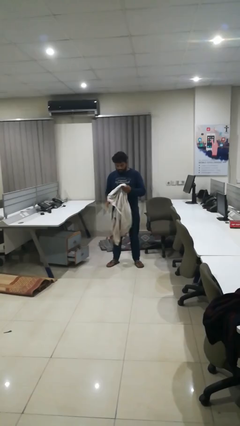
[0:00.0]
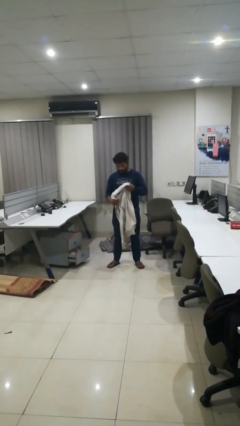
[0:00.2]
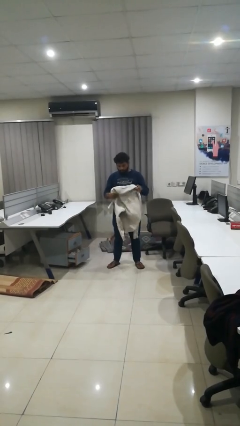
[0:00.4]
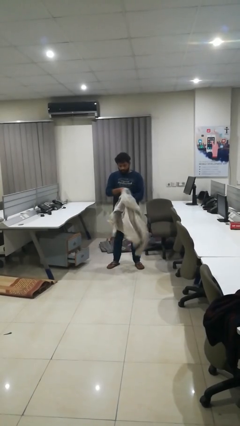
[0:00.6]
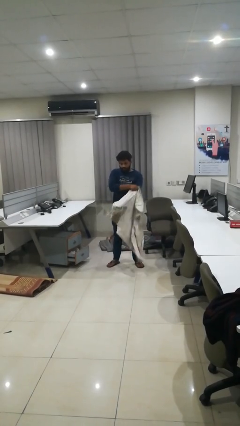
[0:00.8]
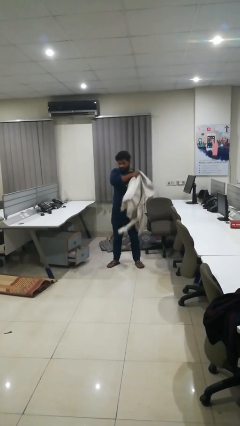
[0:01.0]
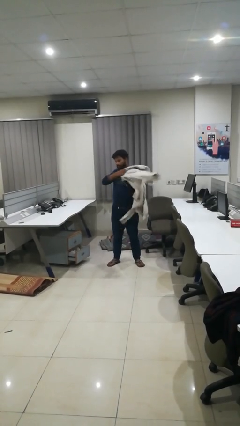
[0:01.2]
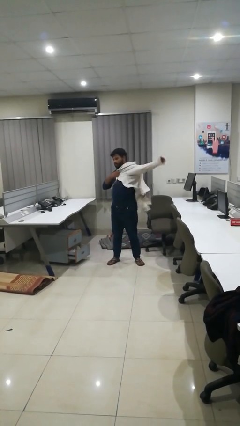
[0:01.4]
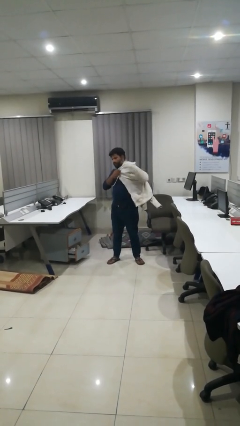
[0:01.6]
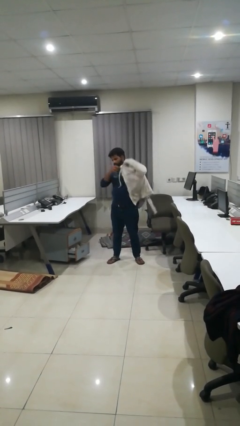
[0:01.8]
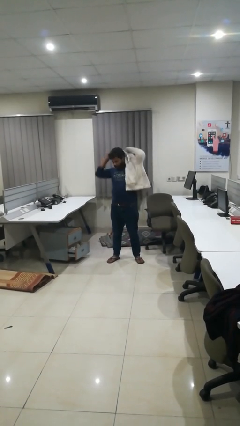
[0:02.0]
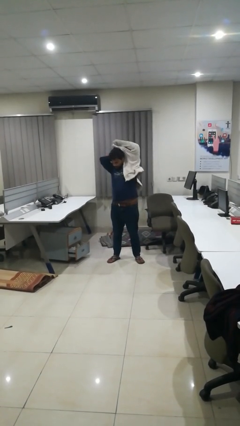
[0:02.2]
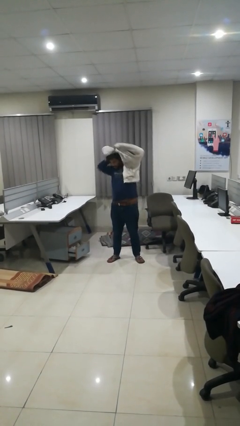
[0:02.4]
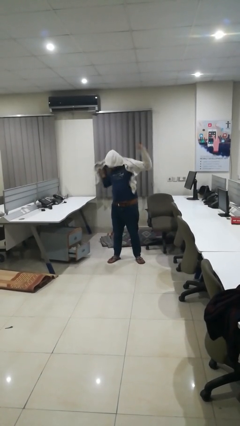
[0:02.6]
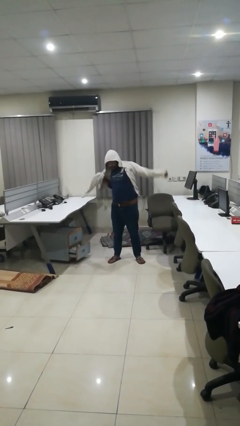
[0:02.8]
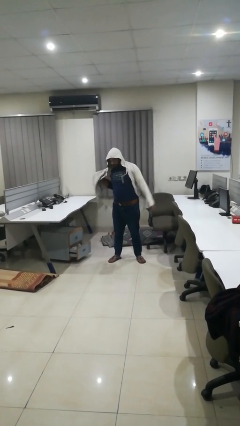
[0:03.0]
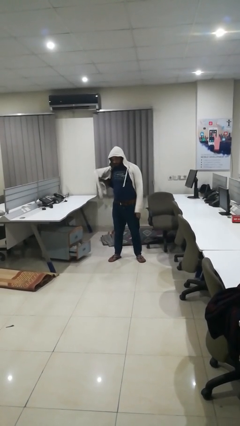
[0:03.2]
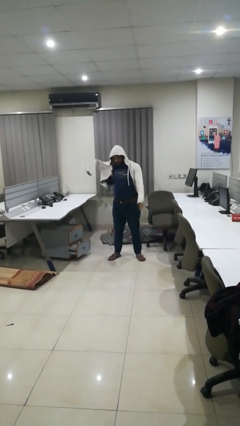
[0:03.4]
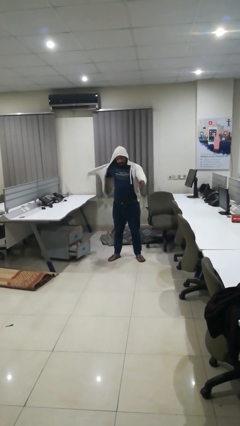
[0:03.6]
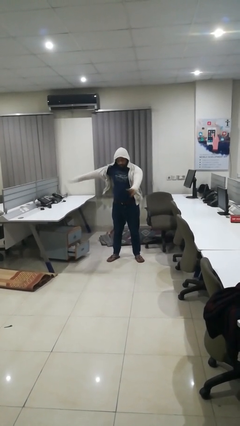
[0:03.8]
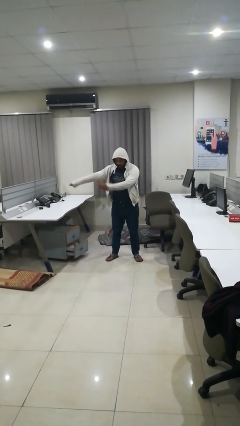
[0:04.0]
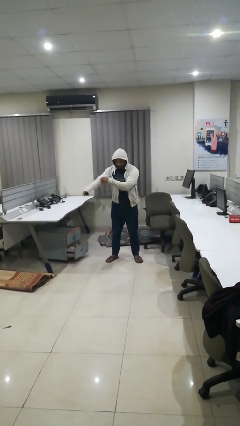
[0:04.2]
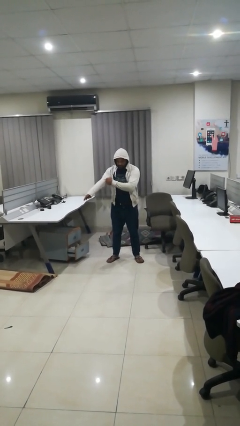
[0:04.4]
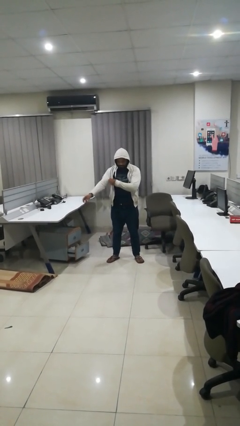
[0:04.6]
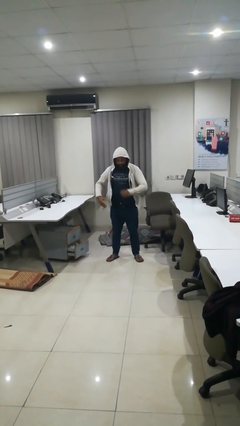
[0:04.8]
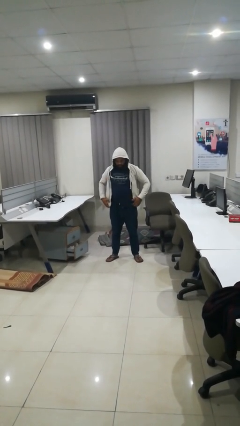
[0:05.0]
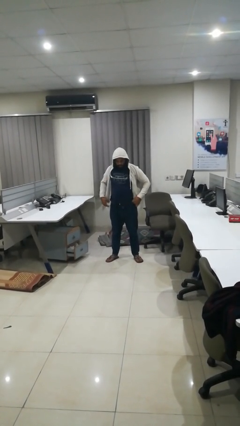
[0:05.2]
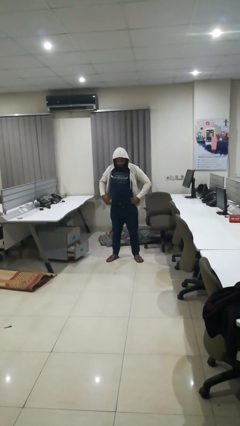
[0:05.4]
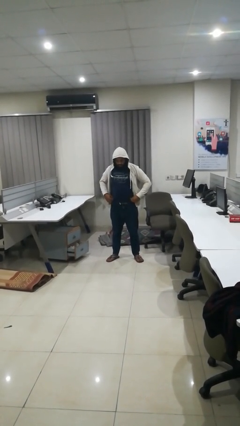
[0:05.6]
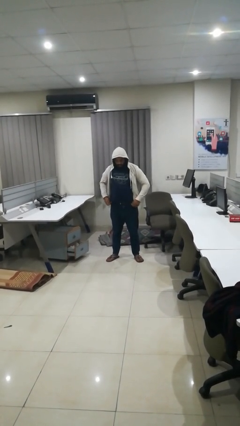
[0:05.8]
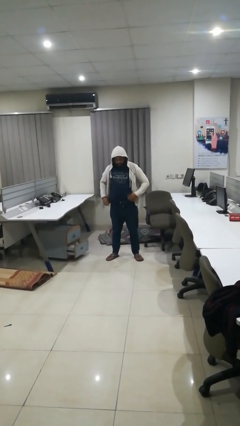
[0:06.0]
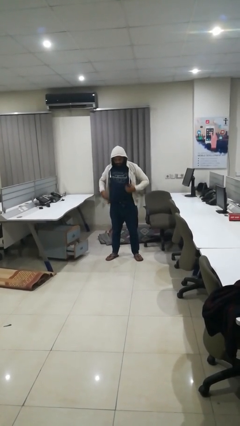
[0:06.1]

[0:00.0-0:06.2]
person puts on hoodie

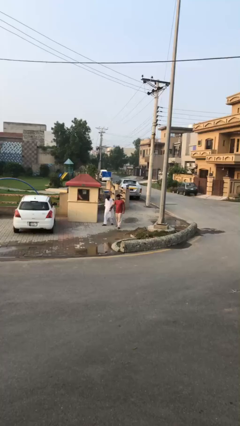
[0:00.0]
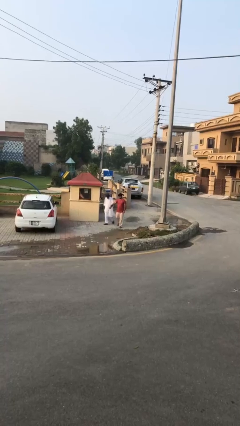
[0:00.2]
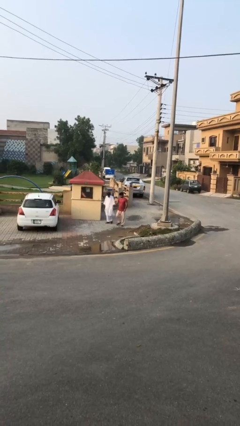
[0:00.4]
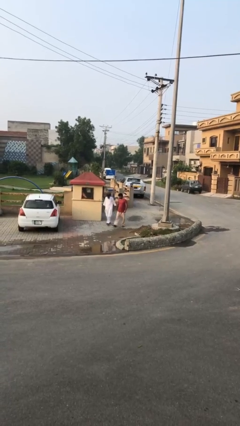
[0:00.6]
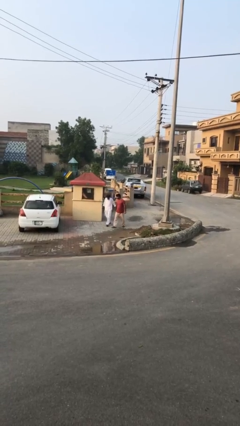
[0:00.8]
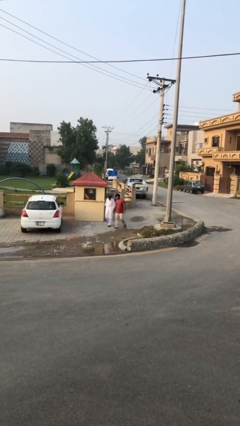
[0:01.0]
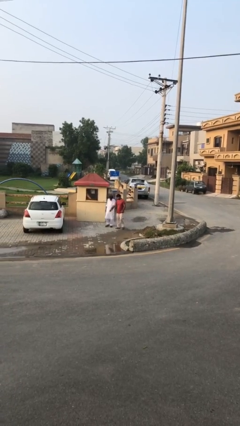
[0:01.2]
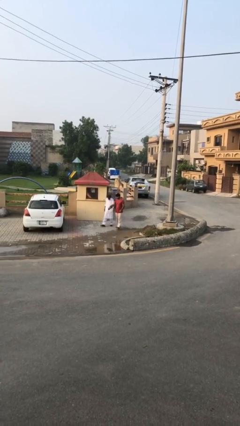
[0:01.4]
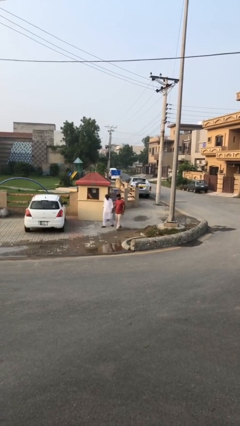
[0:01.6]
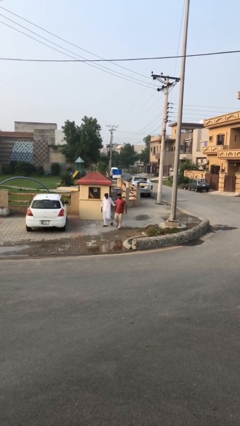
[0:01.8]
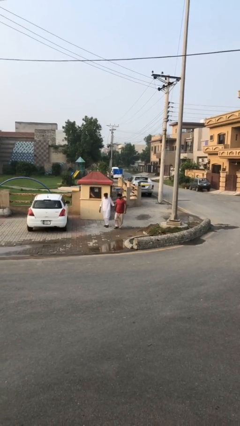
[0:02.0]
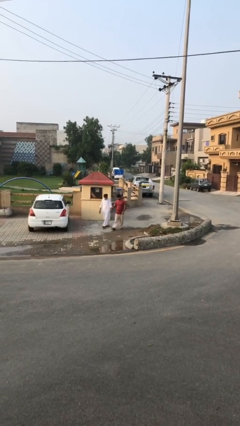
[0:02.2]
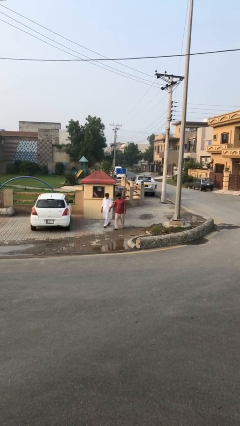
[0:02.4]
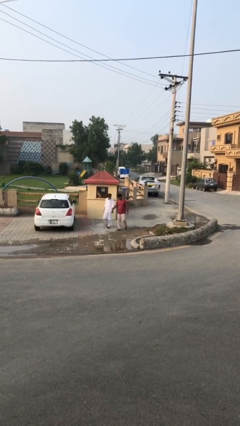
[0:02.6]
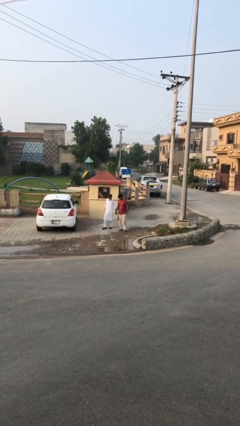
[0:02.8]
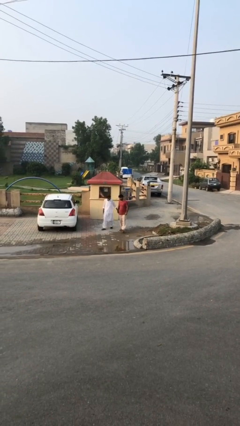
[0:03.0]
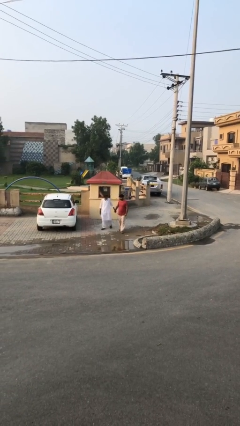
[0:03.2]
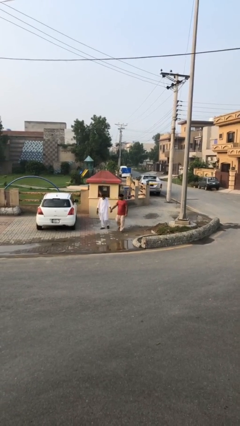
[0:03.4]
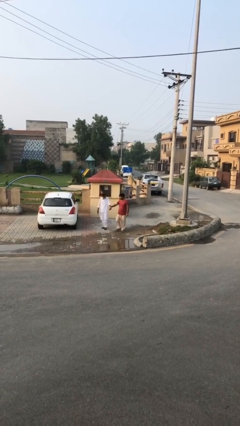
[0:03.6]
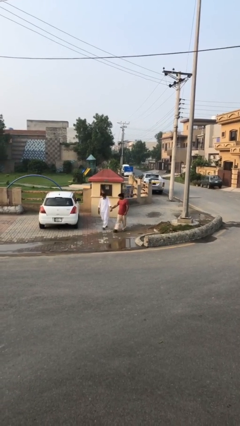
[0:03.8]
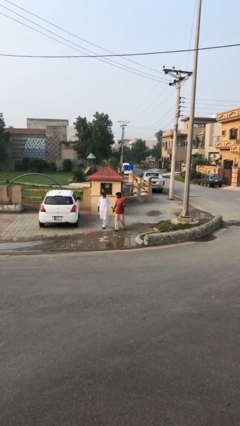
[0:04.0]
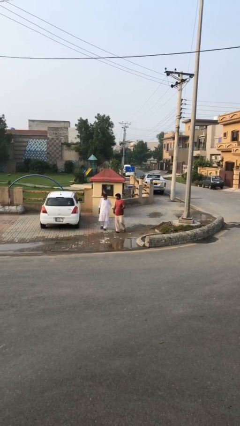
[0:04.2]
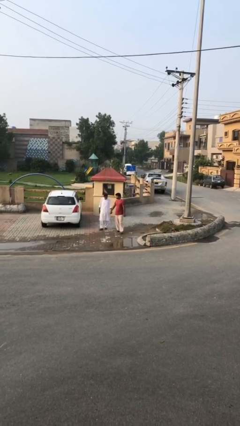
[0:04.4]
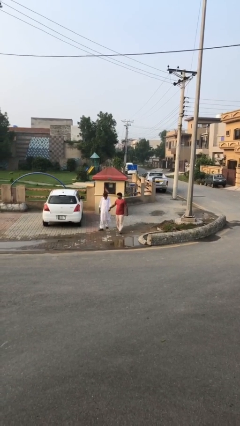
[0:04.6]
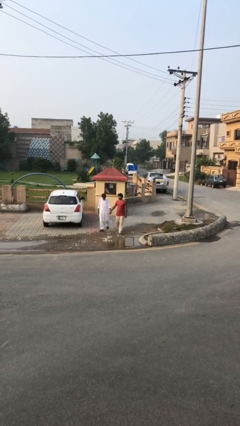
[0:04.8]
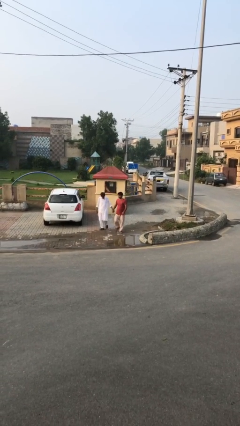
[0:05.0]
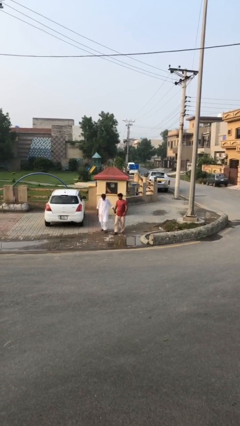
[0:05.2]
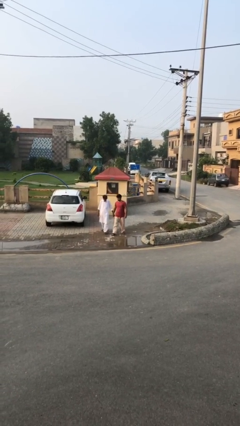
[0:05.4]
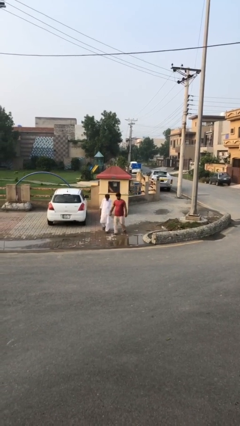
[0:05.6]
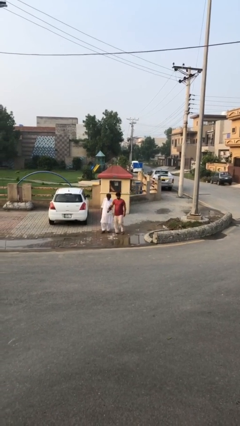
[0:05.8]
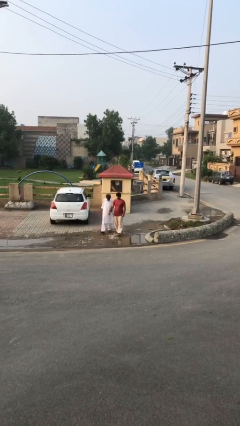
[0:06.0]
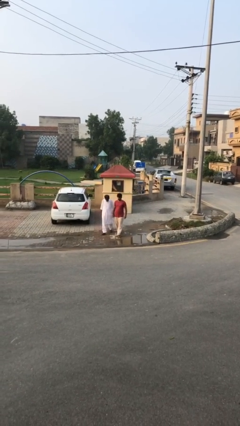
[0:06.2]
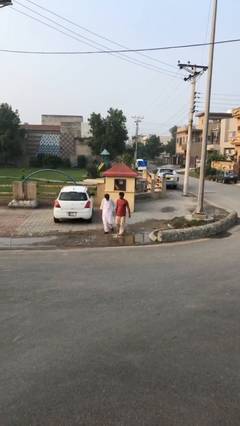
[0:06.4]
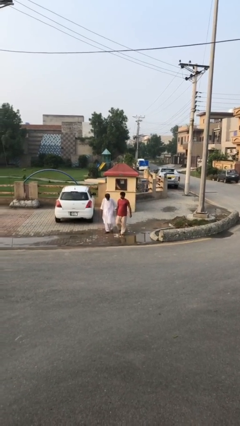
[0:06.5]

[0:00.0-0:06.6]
person holds hand

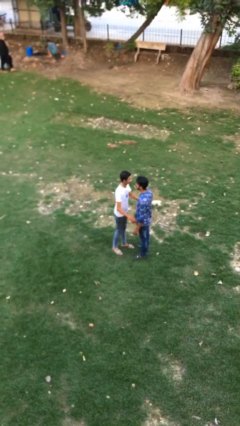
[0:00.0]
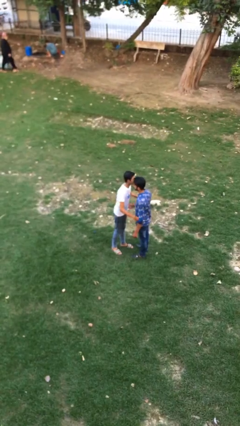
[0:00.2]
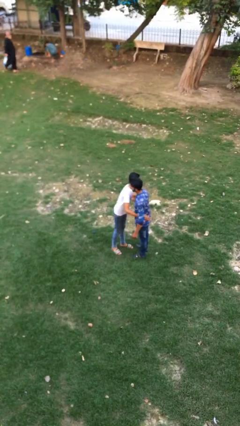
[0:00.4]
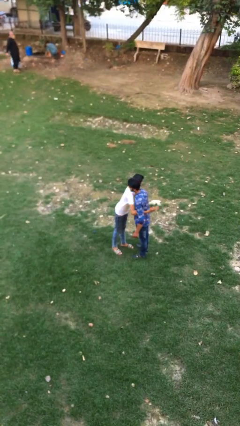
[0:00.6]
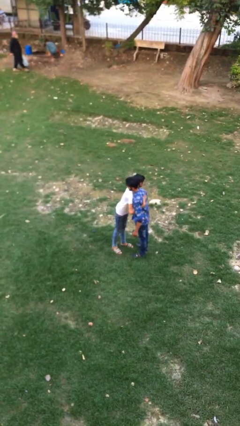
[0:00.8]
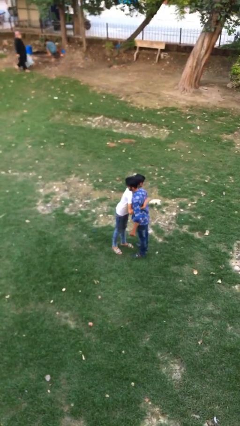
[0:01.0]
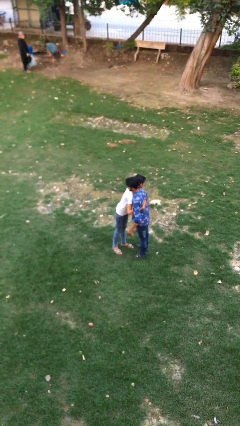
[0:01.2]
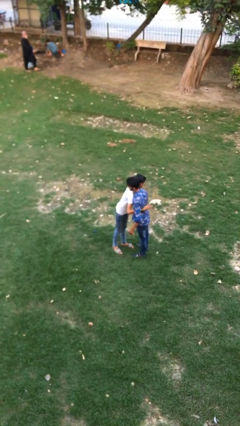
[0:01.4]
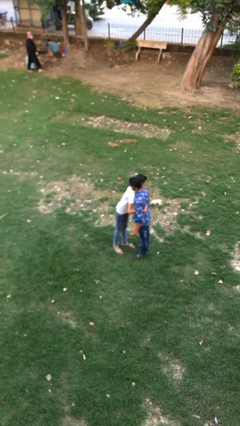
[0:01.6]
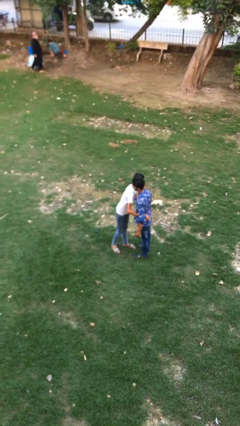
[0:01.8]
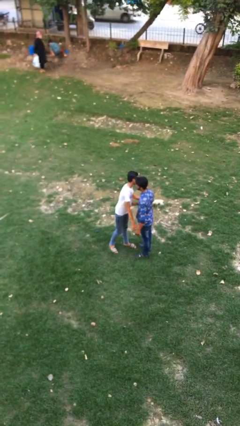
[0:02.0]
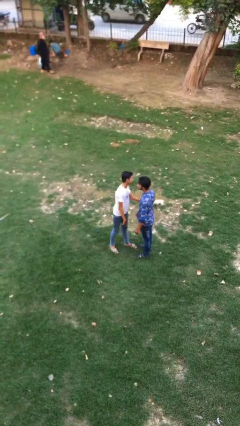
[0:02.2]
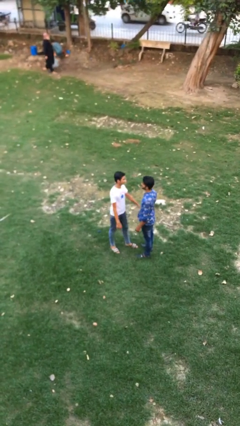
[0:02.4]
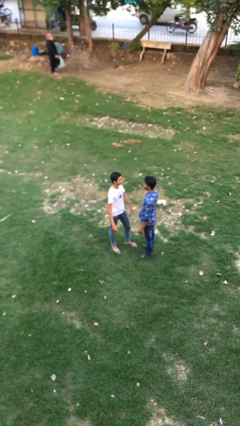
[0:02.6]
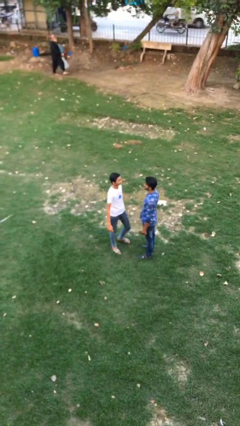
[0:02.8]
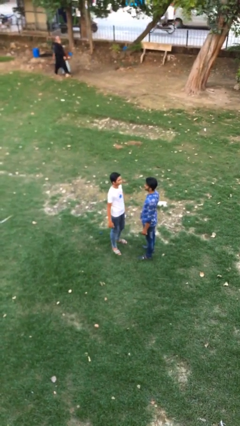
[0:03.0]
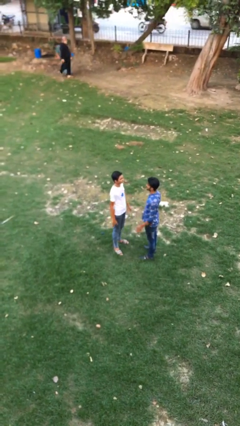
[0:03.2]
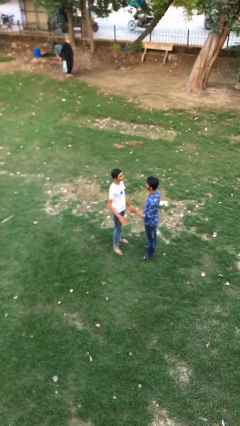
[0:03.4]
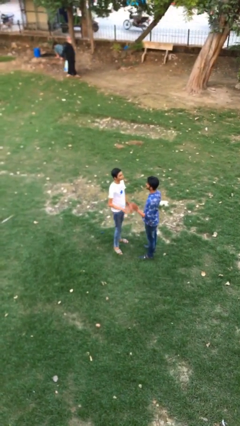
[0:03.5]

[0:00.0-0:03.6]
person embraces person

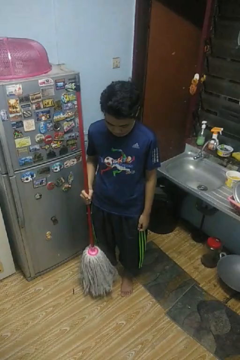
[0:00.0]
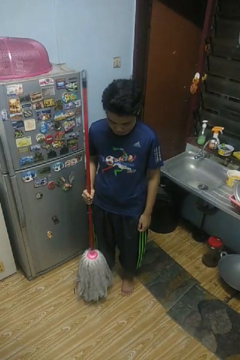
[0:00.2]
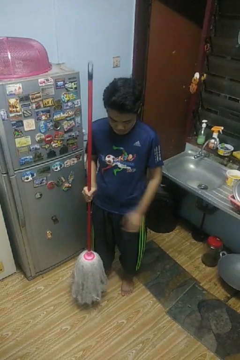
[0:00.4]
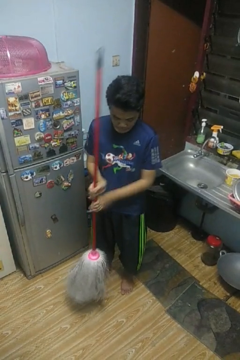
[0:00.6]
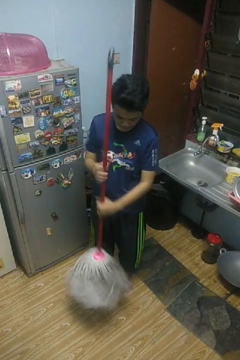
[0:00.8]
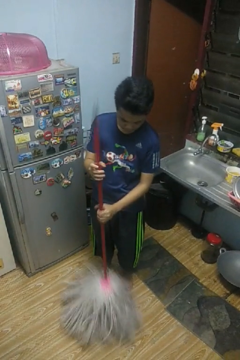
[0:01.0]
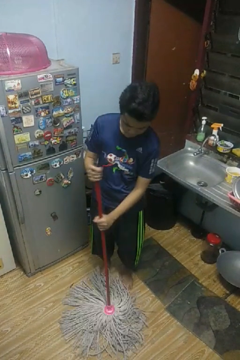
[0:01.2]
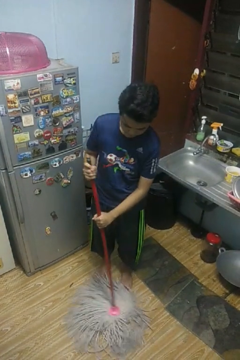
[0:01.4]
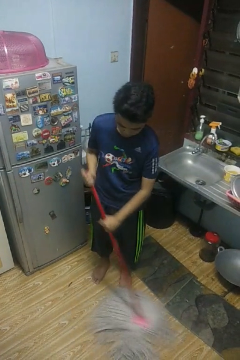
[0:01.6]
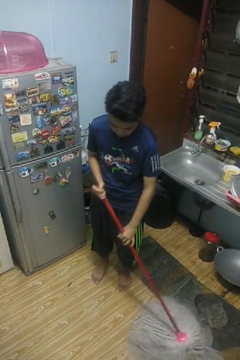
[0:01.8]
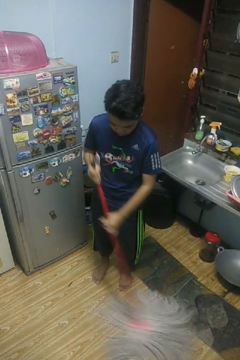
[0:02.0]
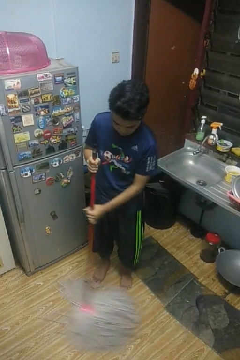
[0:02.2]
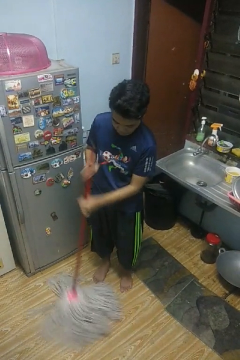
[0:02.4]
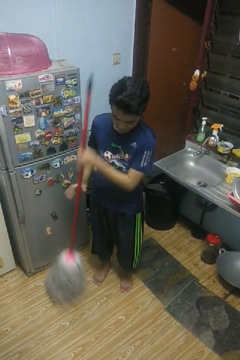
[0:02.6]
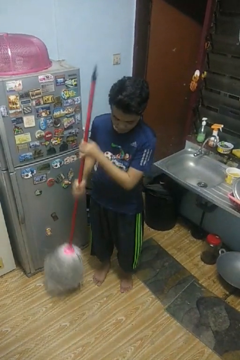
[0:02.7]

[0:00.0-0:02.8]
person mops
